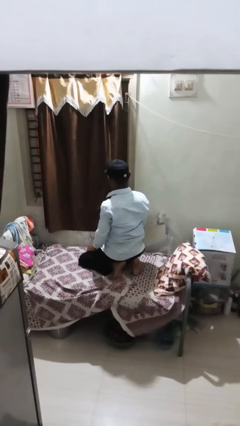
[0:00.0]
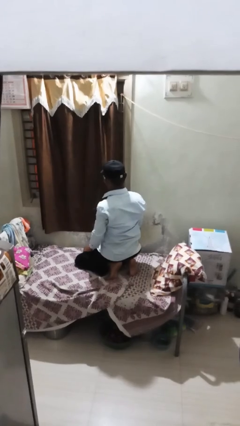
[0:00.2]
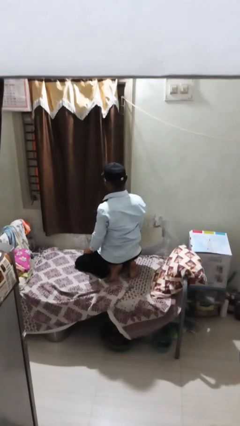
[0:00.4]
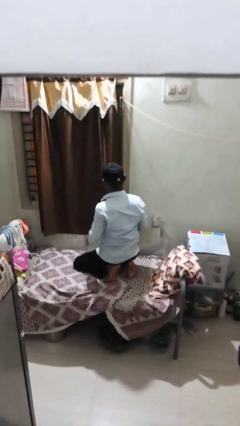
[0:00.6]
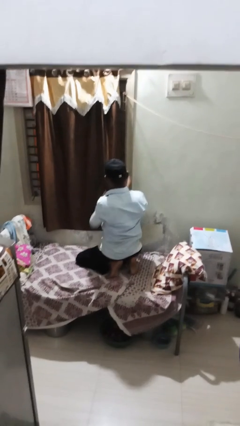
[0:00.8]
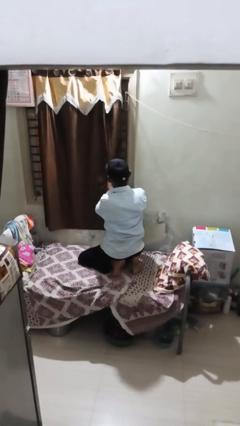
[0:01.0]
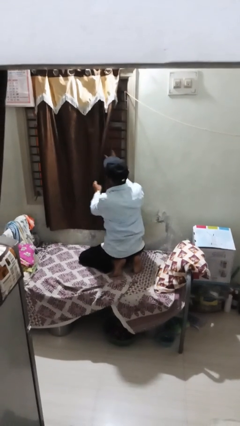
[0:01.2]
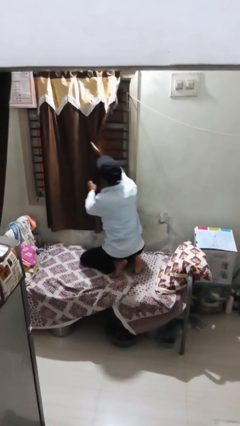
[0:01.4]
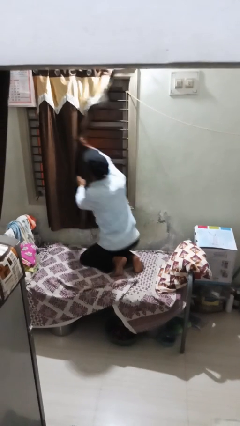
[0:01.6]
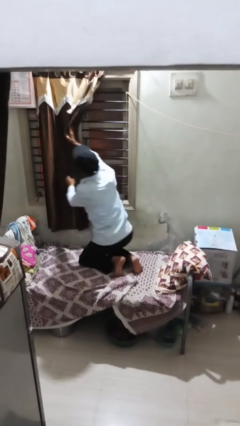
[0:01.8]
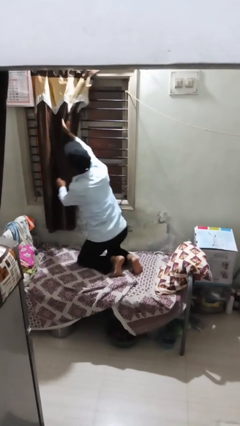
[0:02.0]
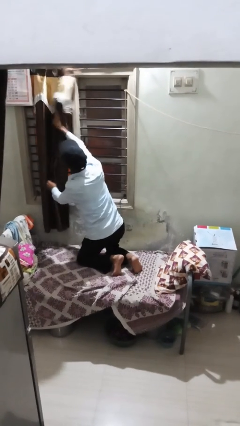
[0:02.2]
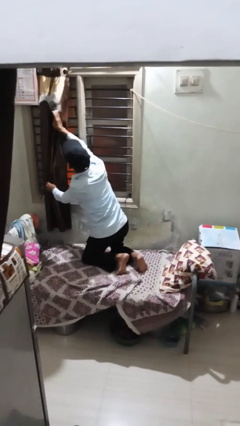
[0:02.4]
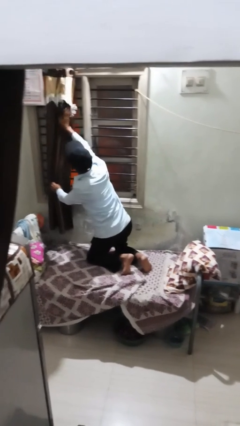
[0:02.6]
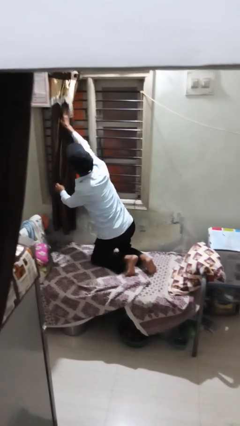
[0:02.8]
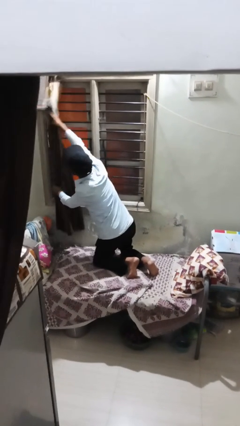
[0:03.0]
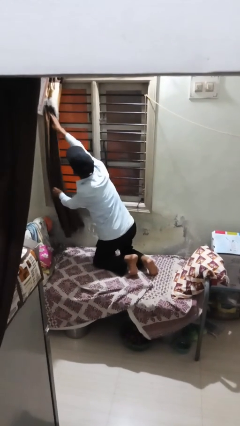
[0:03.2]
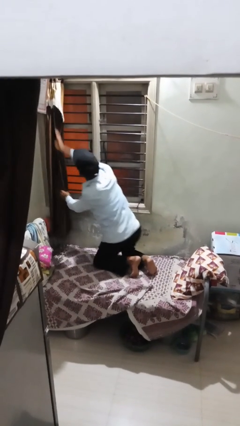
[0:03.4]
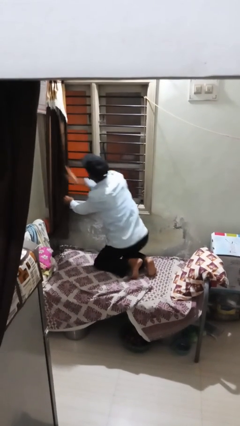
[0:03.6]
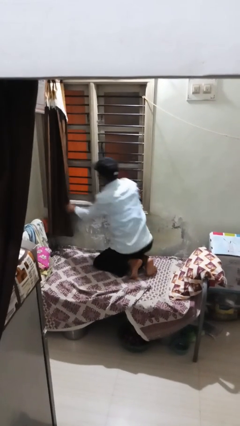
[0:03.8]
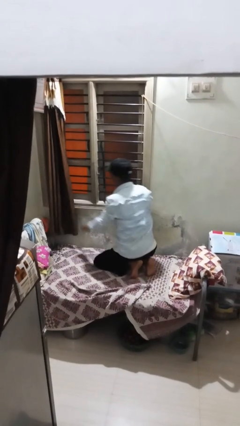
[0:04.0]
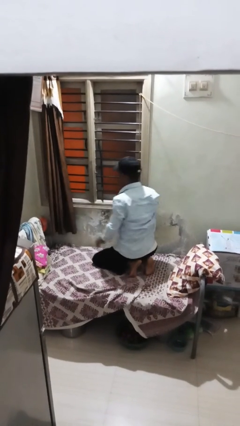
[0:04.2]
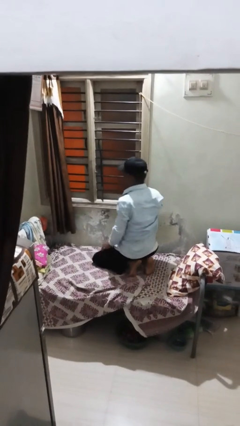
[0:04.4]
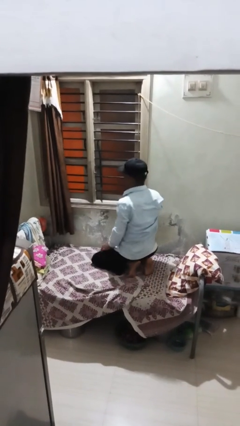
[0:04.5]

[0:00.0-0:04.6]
person opens curtains

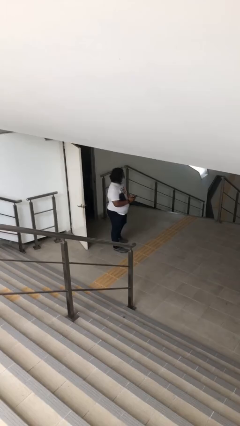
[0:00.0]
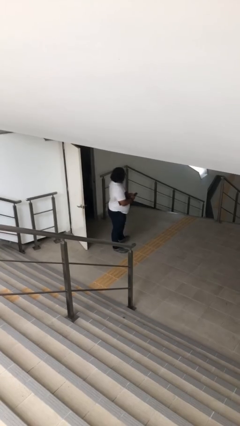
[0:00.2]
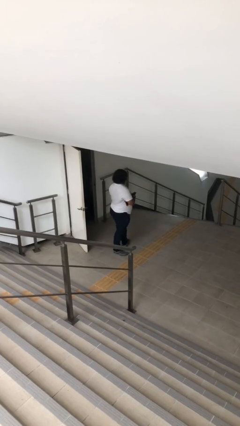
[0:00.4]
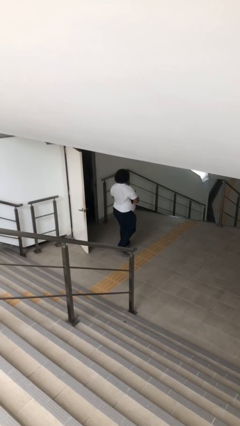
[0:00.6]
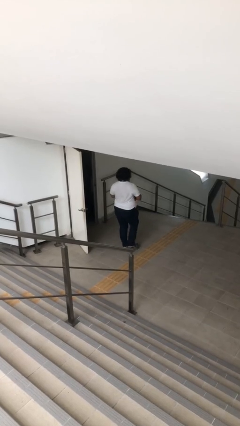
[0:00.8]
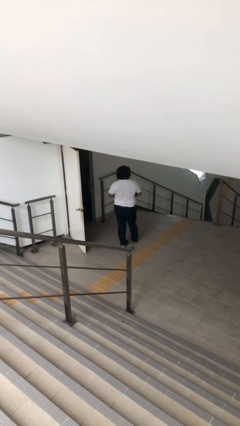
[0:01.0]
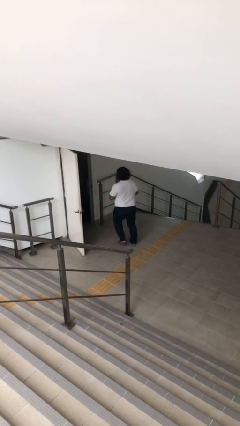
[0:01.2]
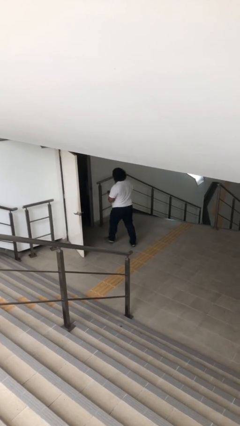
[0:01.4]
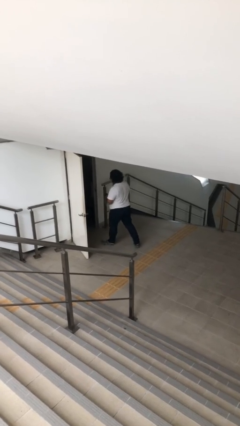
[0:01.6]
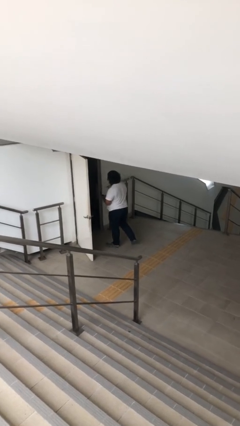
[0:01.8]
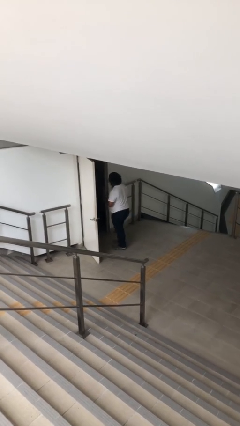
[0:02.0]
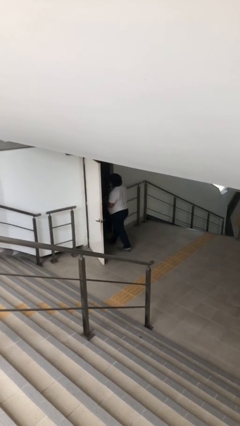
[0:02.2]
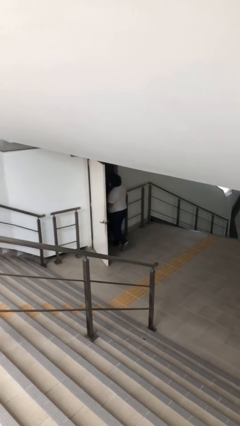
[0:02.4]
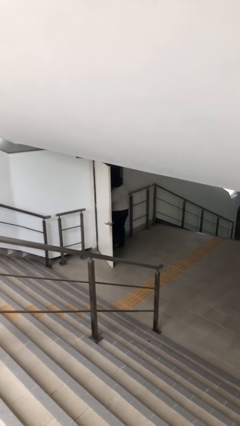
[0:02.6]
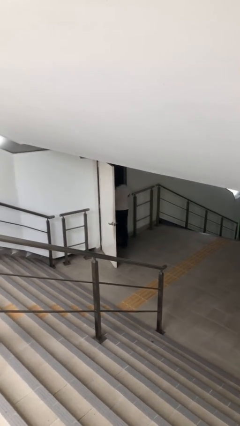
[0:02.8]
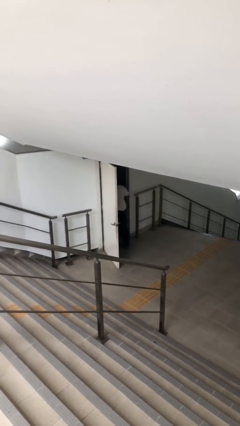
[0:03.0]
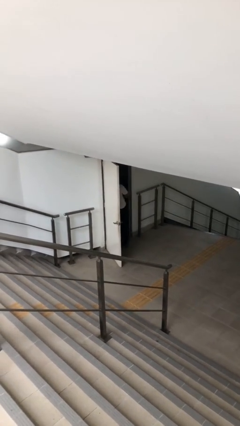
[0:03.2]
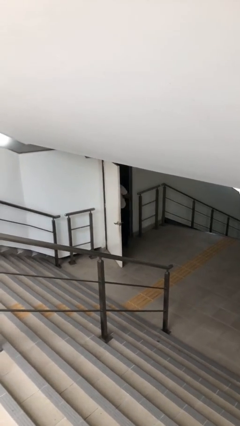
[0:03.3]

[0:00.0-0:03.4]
person exits scene through structure

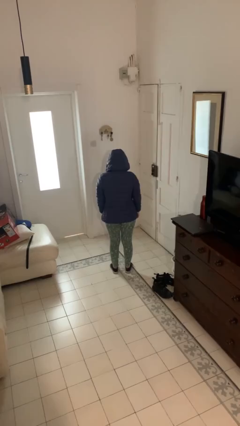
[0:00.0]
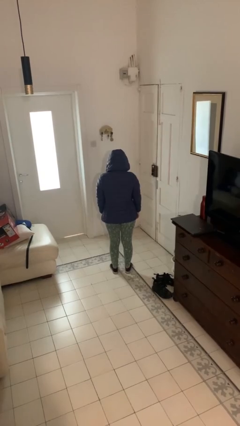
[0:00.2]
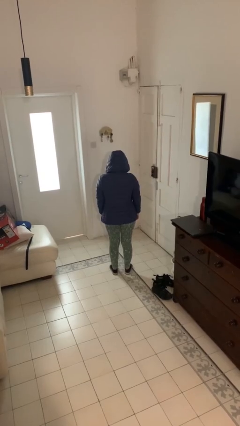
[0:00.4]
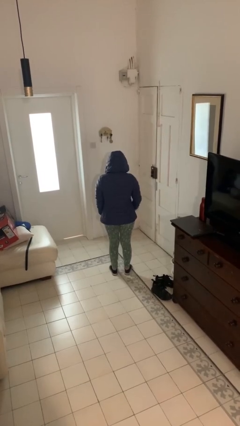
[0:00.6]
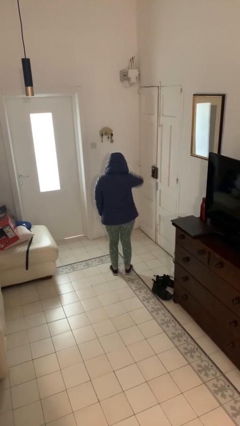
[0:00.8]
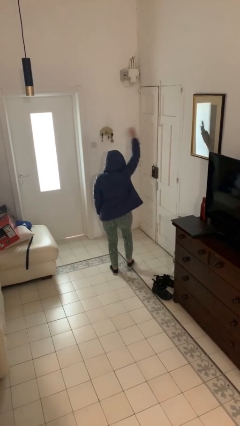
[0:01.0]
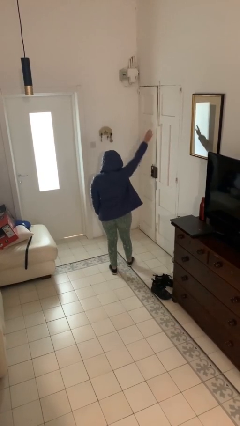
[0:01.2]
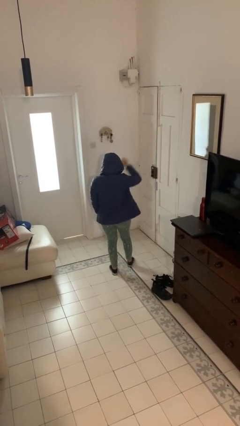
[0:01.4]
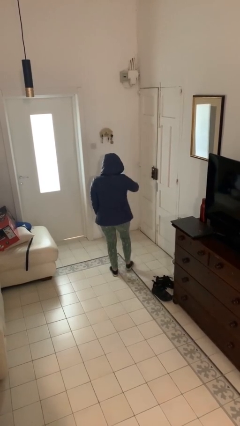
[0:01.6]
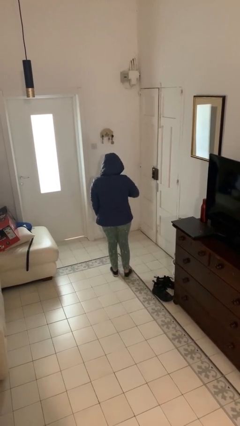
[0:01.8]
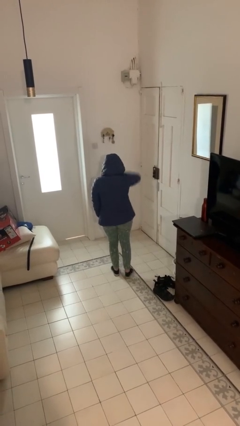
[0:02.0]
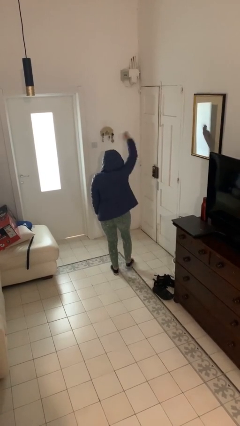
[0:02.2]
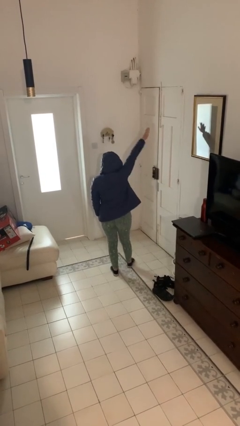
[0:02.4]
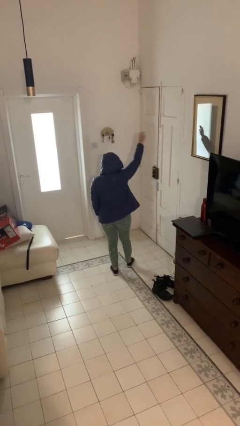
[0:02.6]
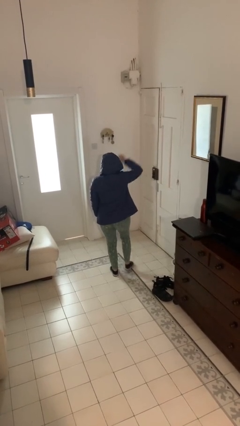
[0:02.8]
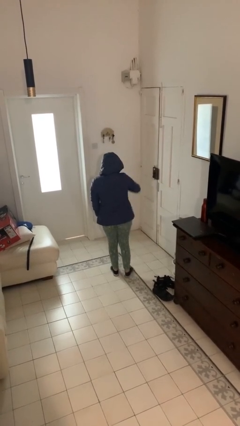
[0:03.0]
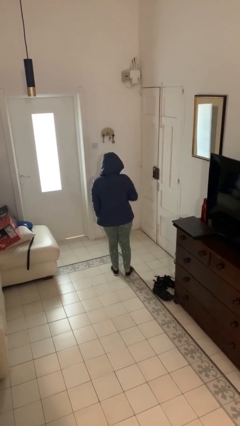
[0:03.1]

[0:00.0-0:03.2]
person dances in place

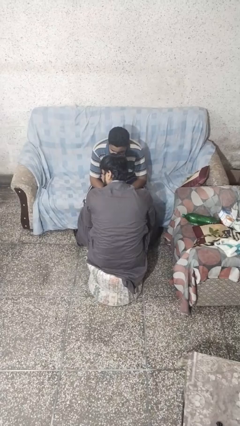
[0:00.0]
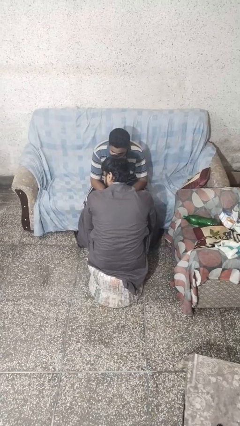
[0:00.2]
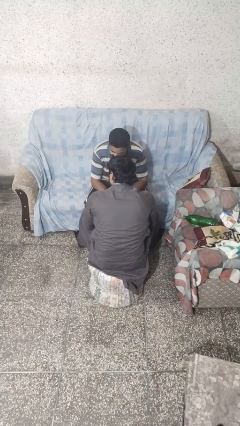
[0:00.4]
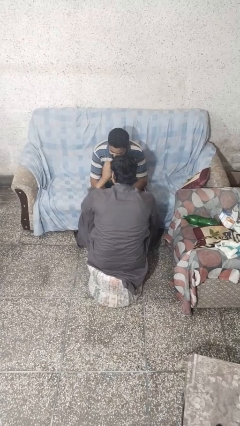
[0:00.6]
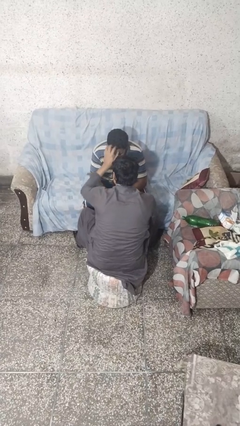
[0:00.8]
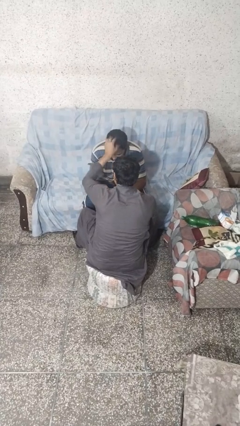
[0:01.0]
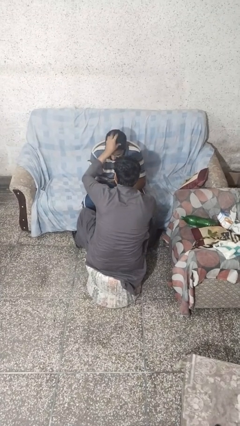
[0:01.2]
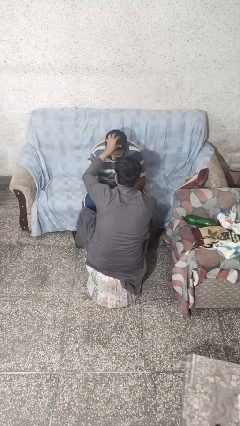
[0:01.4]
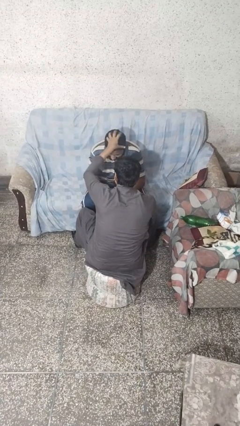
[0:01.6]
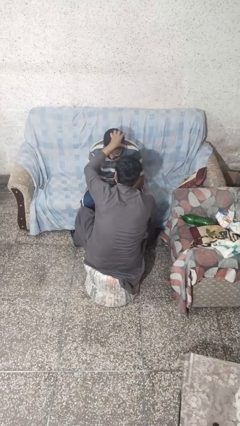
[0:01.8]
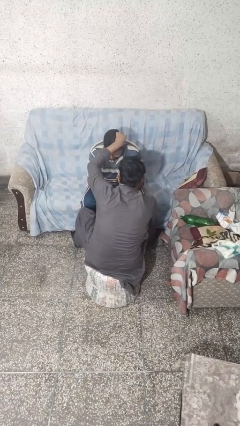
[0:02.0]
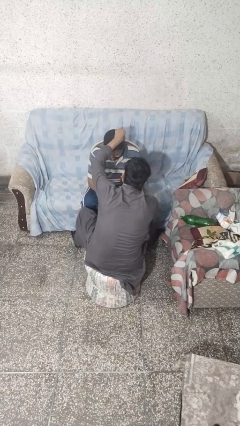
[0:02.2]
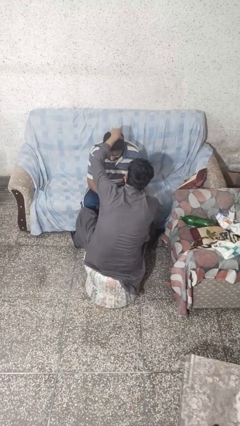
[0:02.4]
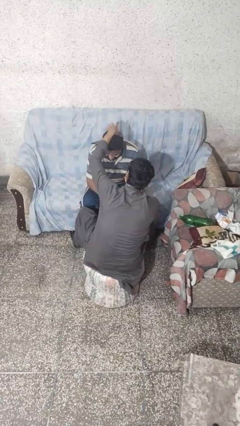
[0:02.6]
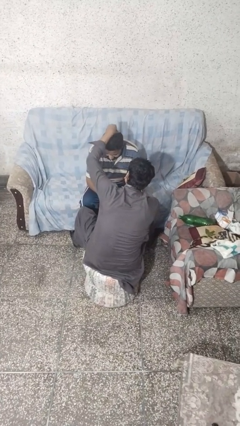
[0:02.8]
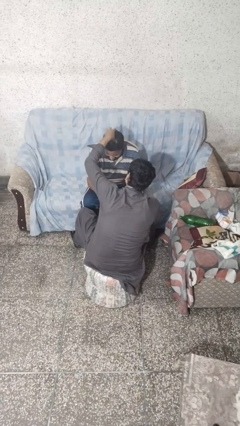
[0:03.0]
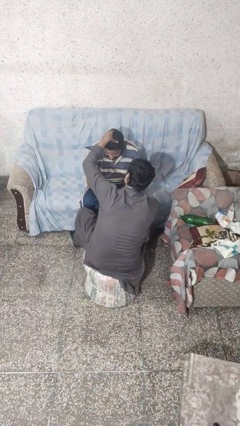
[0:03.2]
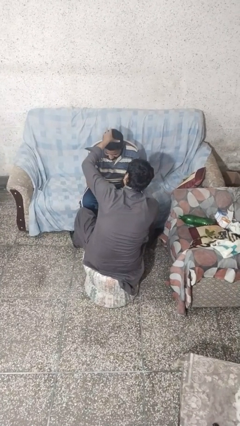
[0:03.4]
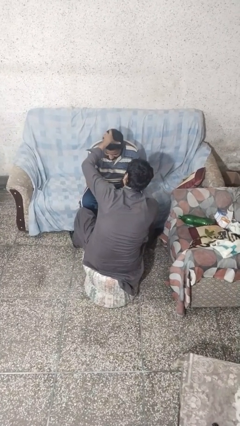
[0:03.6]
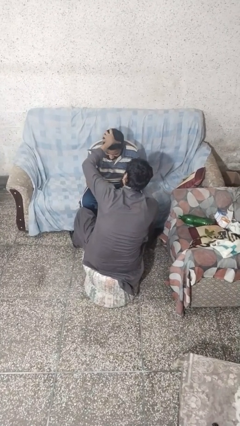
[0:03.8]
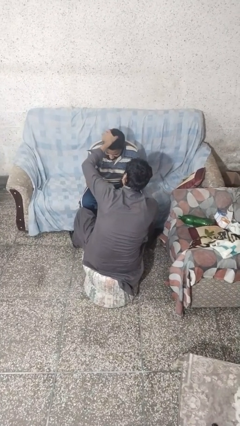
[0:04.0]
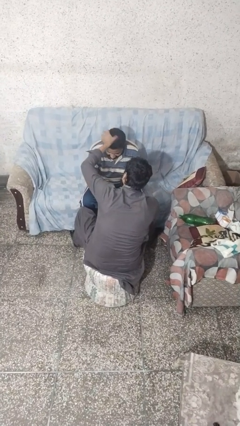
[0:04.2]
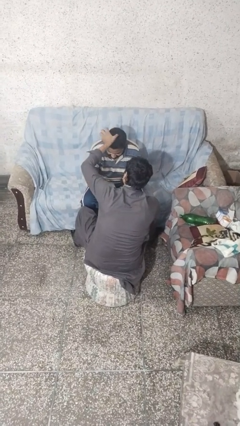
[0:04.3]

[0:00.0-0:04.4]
person braids hair of person

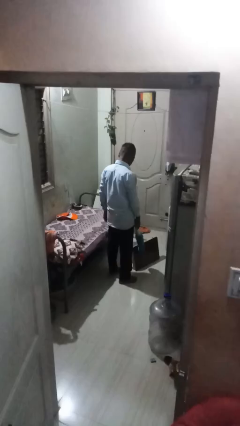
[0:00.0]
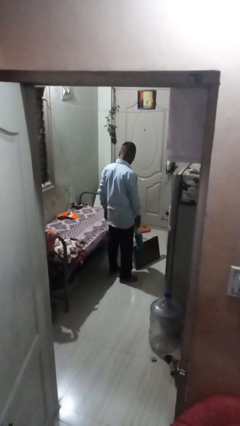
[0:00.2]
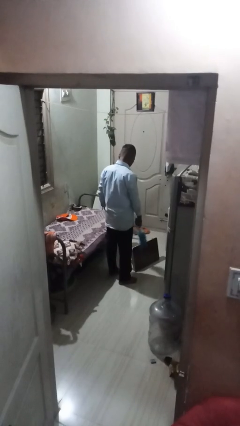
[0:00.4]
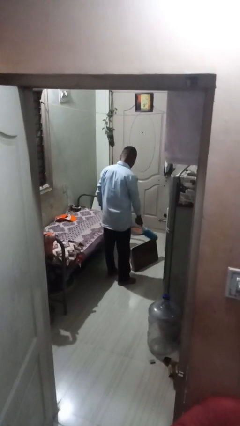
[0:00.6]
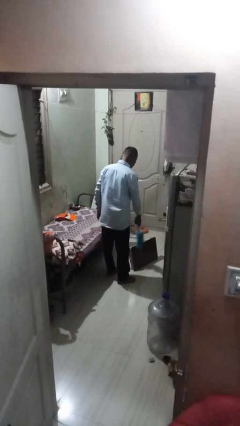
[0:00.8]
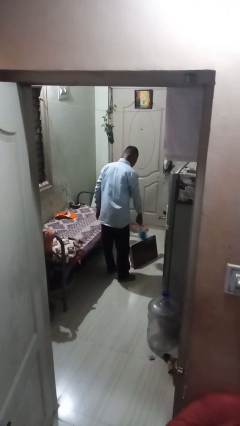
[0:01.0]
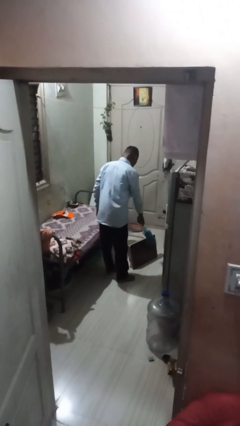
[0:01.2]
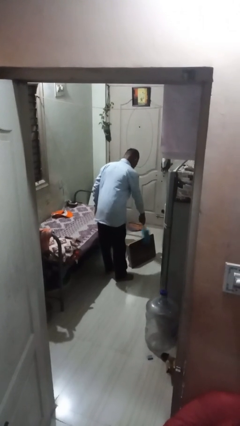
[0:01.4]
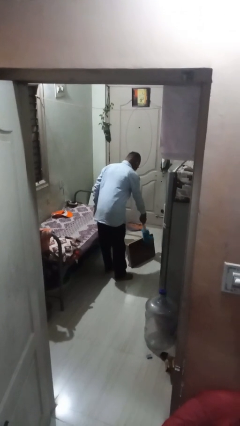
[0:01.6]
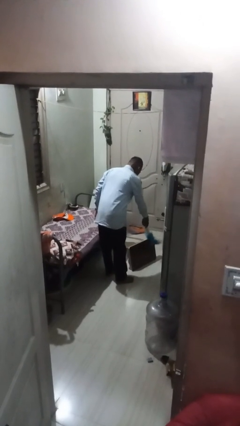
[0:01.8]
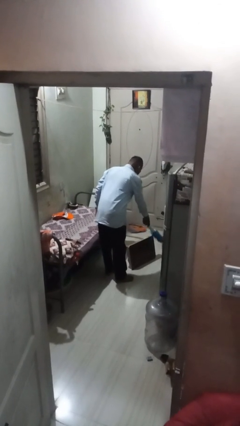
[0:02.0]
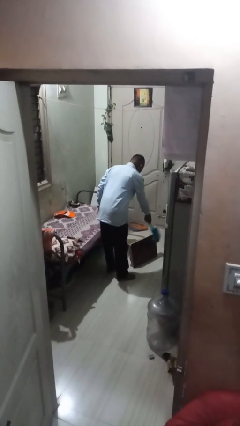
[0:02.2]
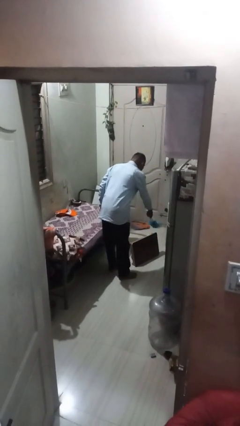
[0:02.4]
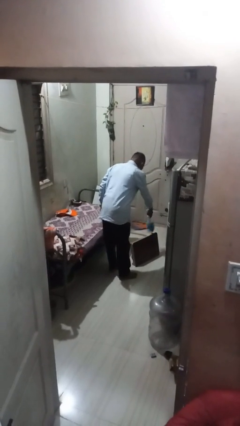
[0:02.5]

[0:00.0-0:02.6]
person dusts furniture
